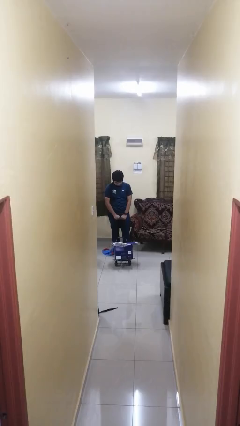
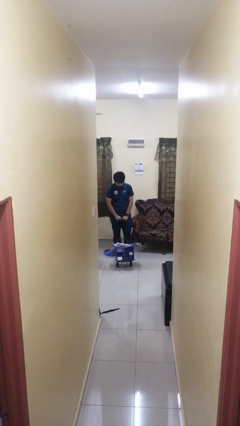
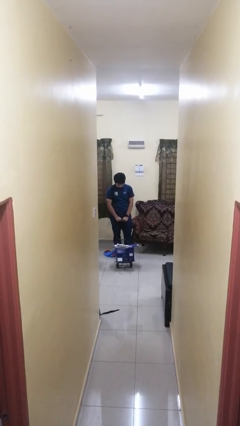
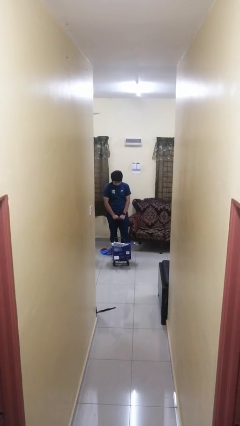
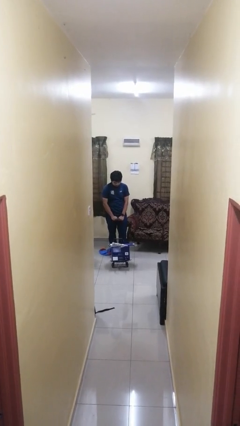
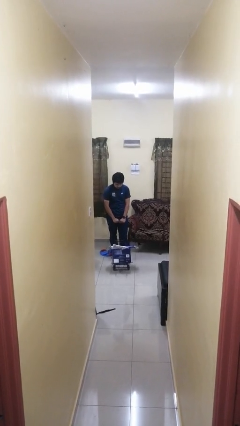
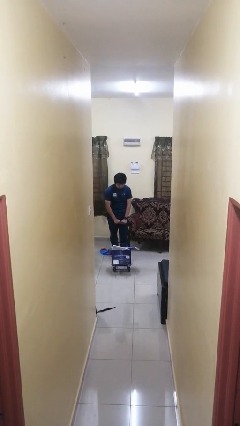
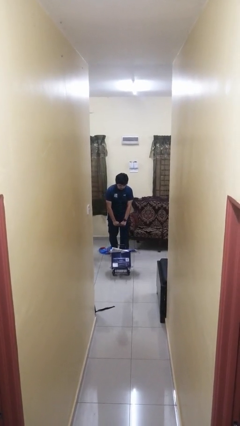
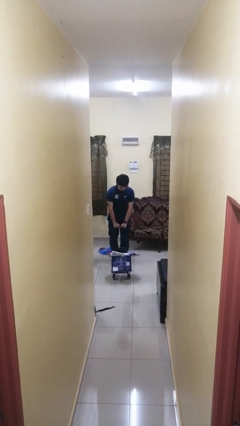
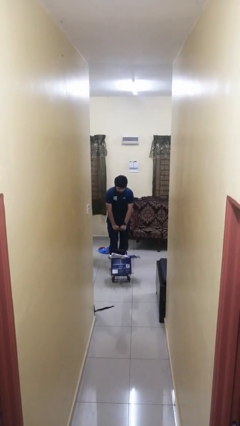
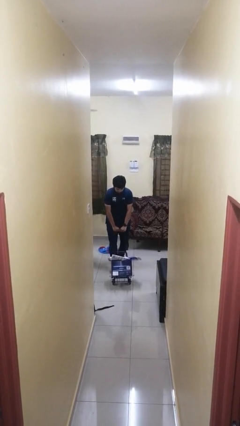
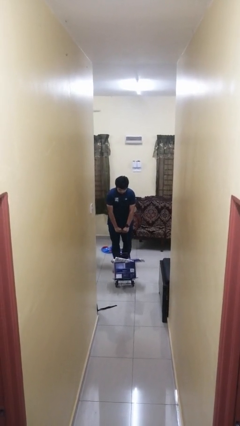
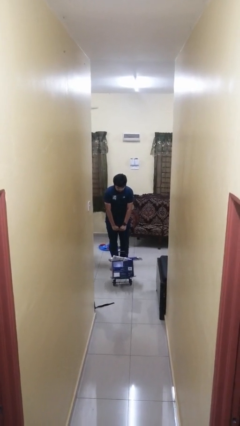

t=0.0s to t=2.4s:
person pushes wheeled cart

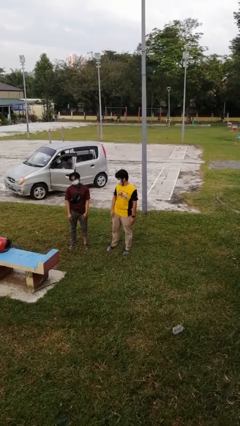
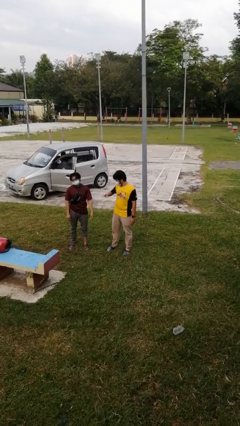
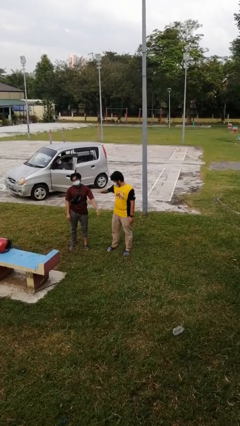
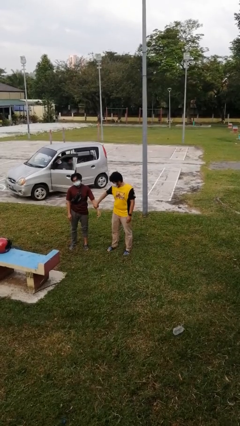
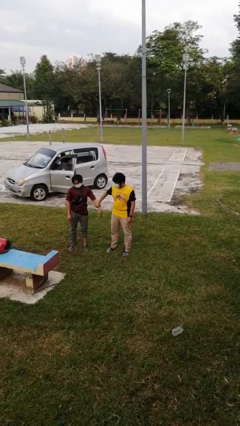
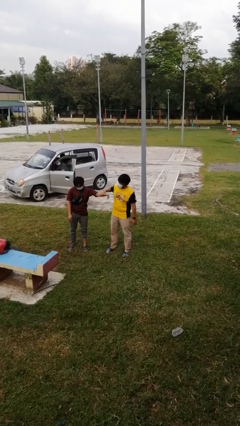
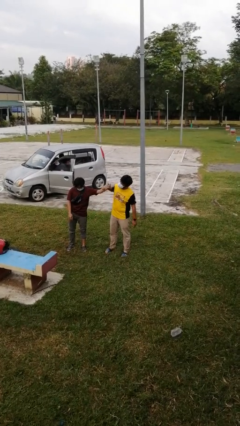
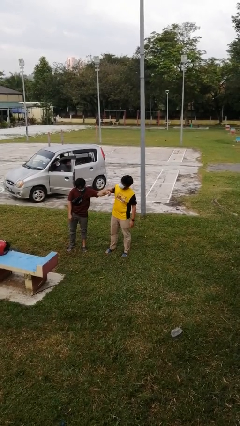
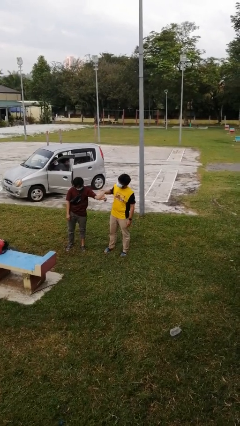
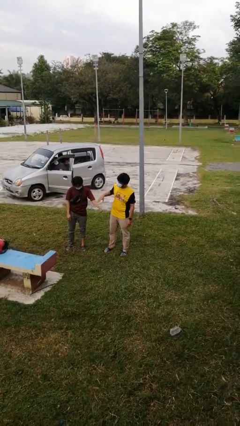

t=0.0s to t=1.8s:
person grabs person by forearm

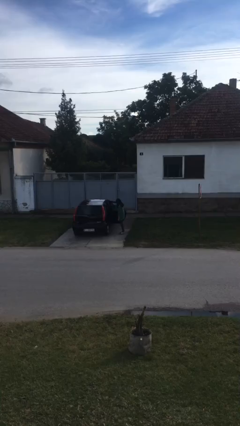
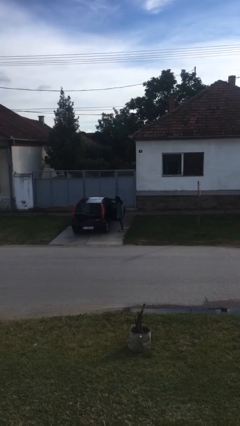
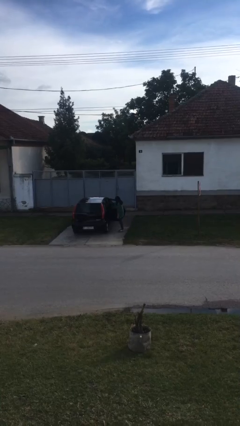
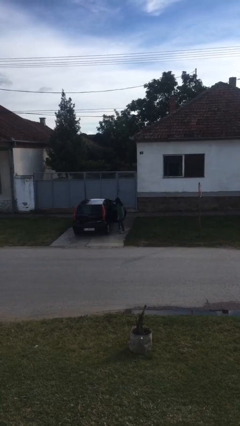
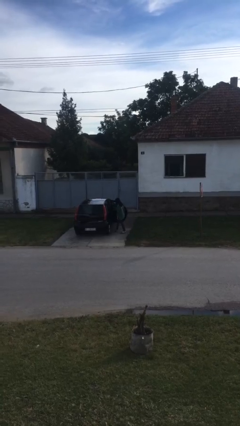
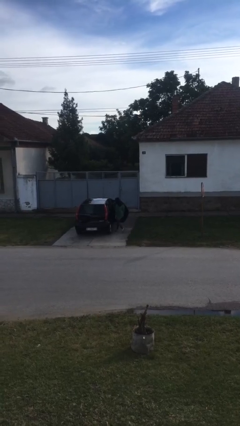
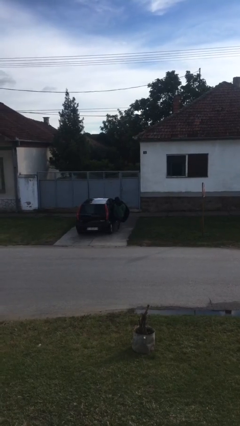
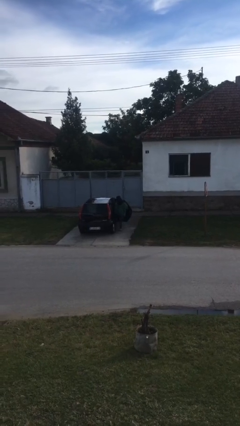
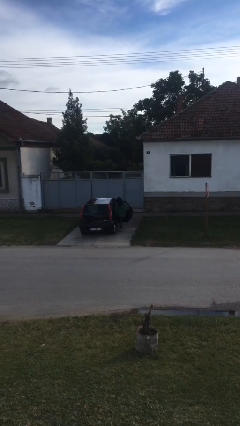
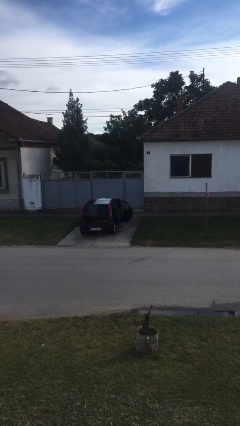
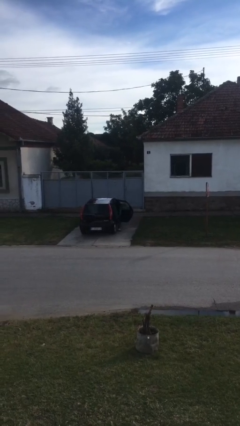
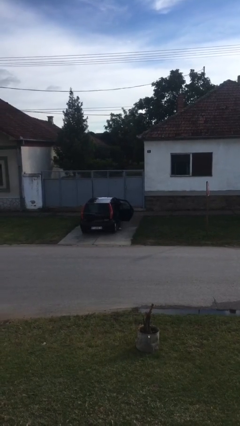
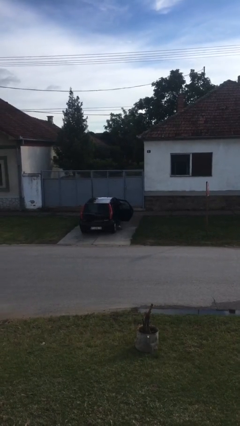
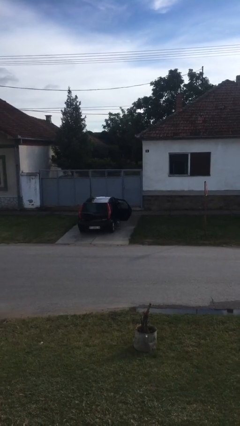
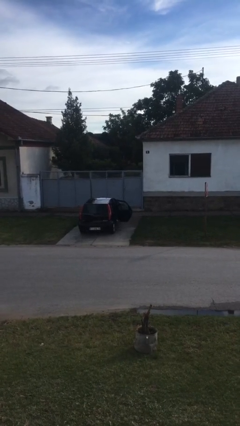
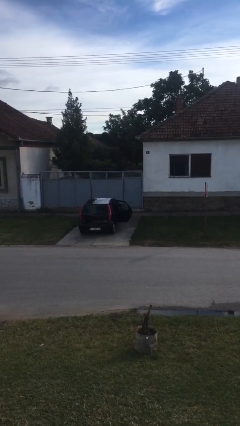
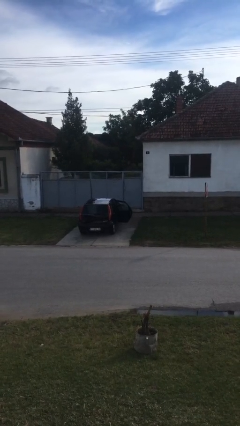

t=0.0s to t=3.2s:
person enters car

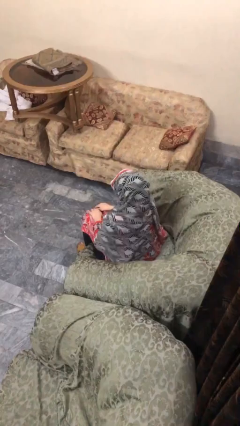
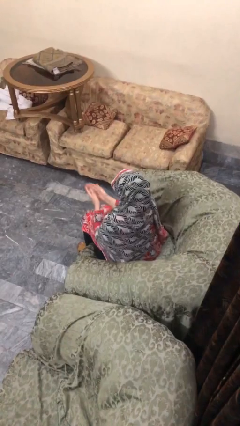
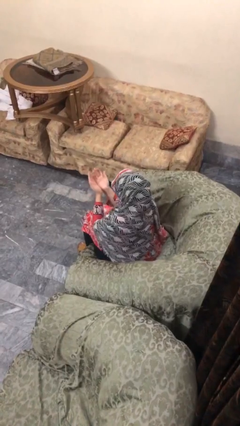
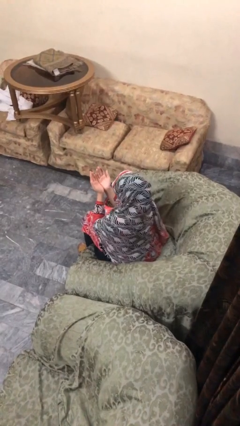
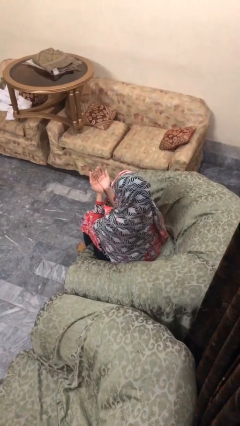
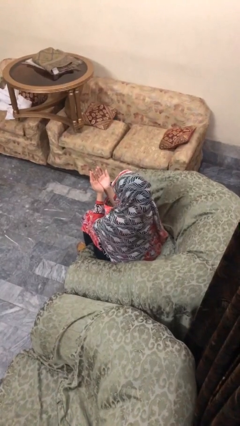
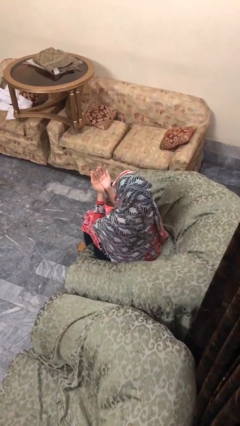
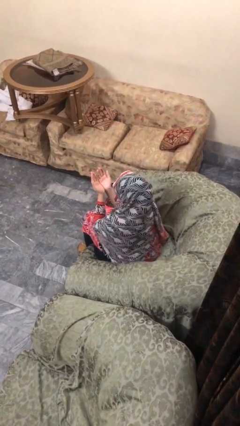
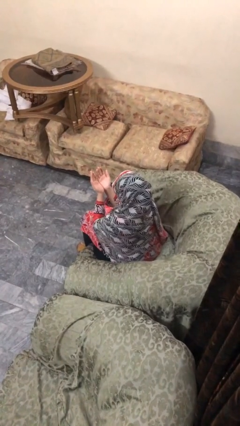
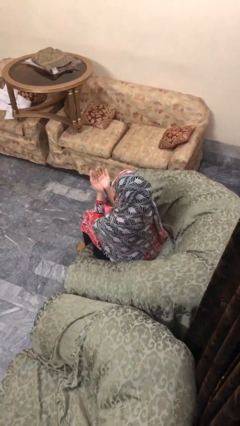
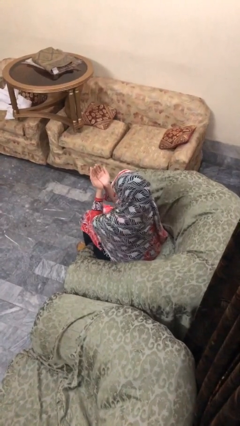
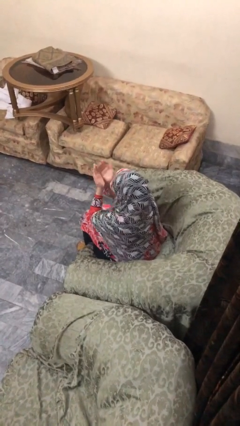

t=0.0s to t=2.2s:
person prays

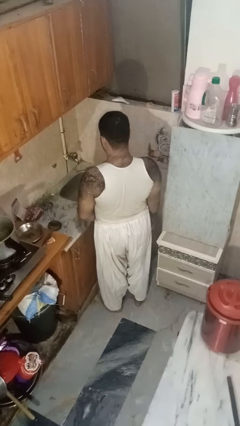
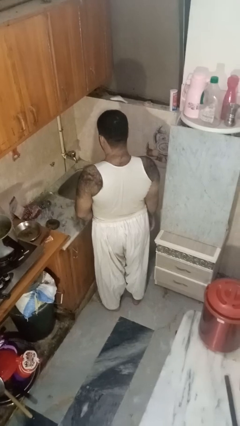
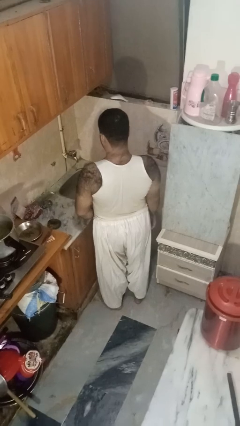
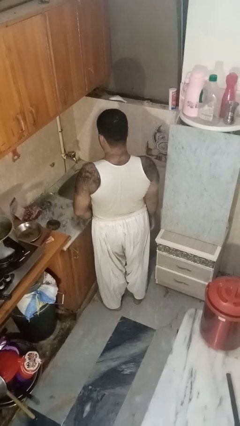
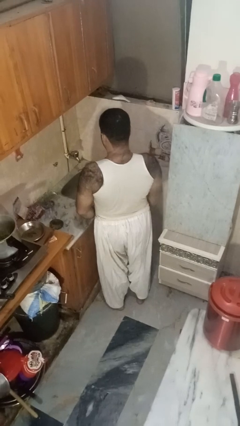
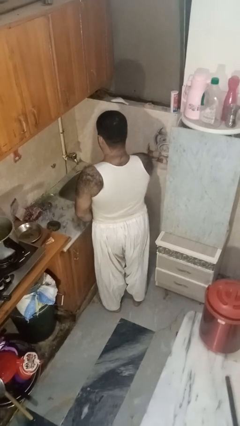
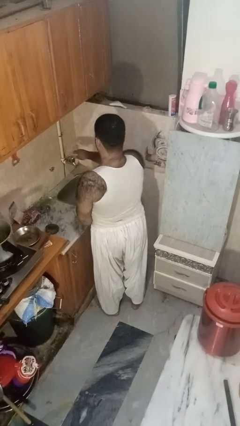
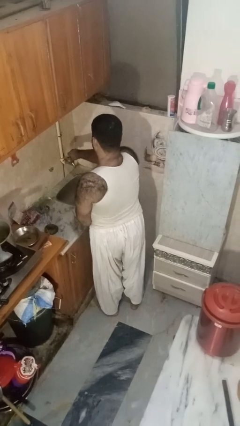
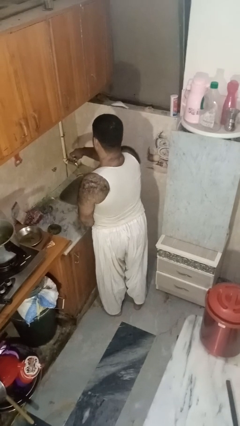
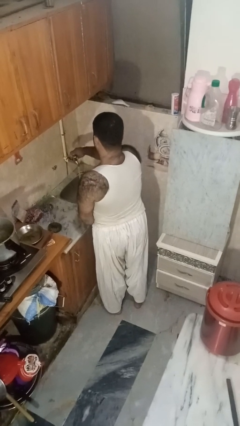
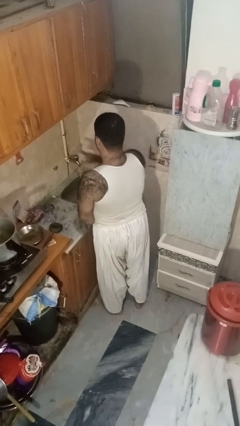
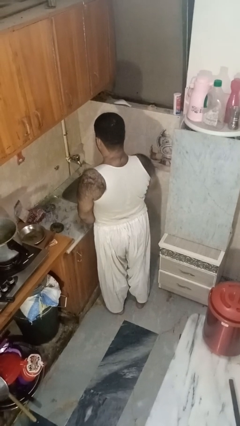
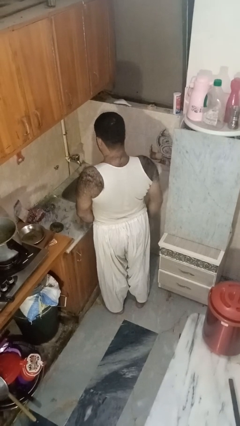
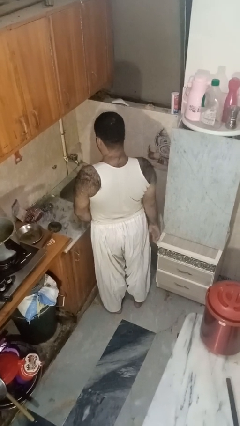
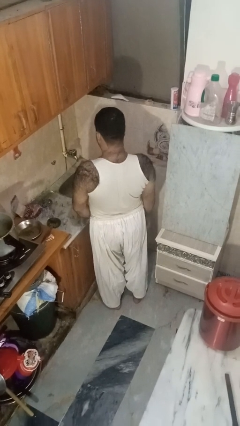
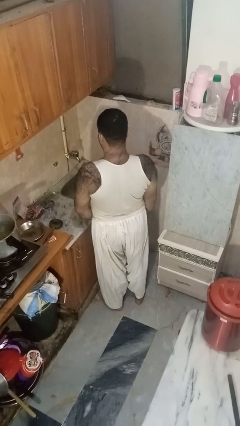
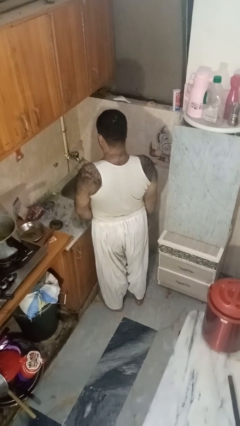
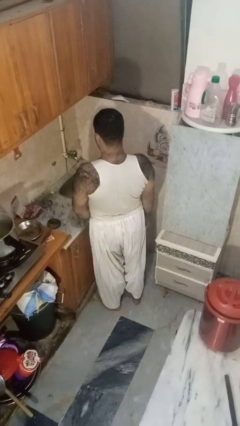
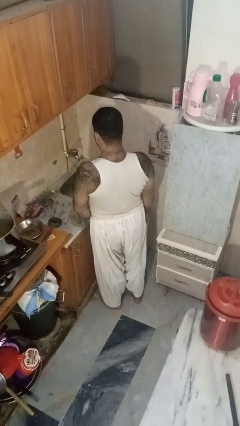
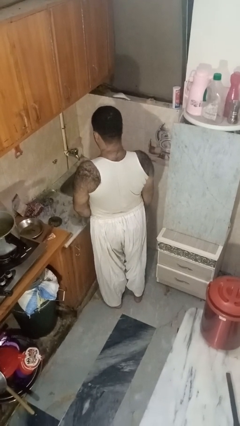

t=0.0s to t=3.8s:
person turns on faucet

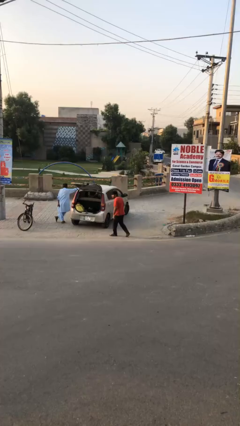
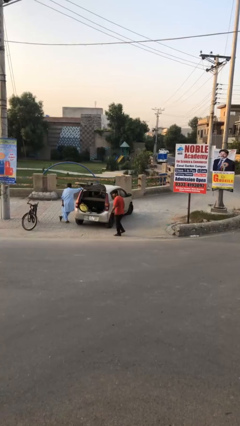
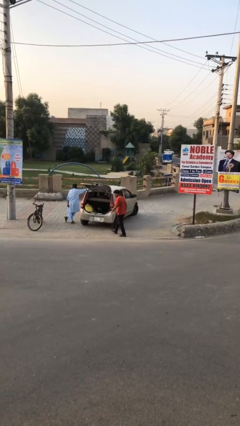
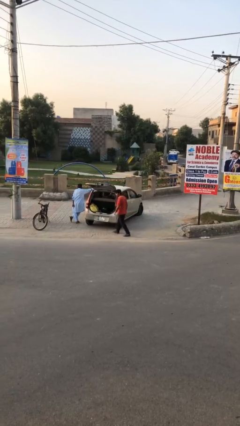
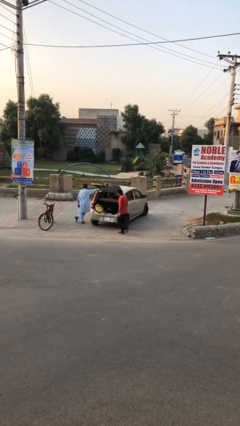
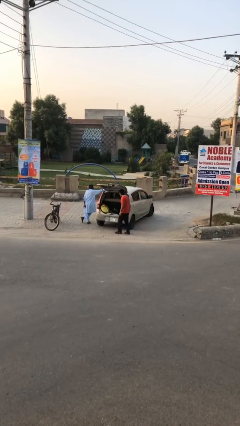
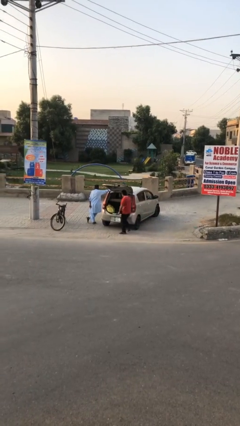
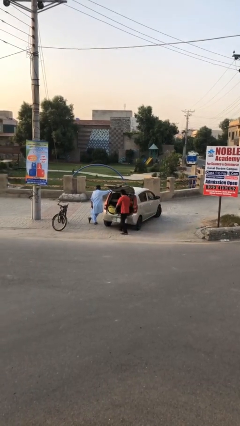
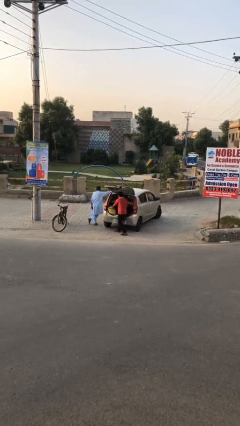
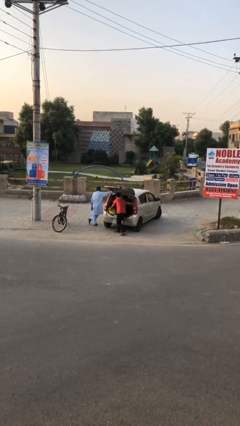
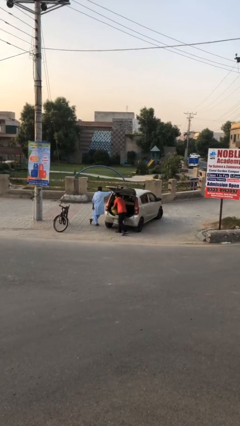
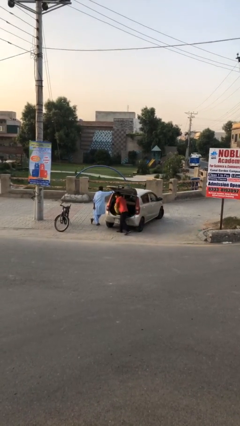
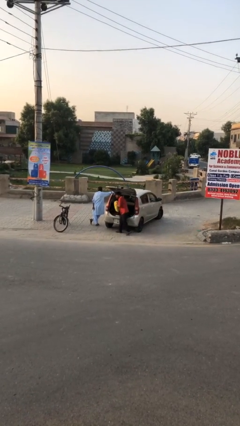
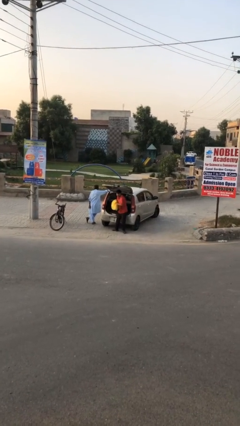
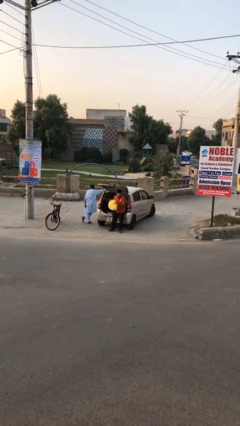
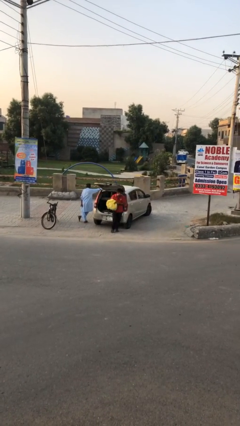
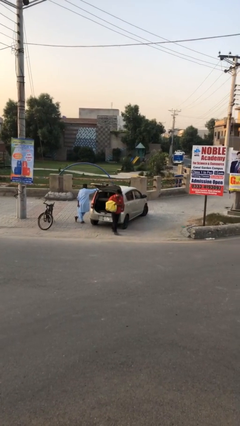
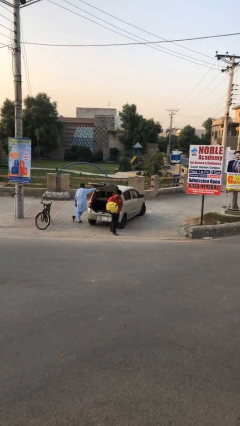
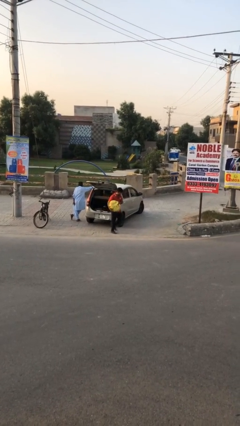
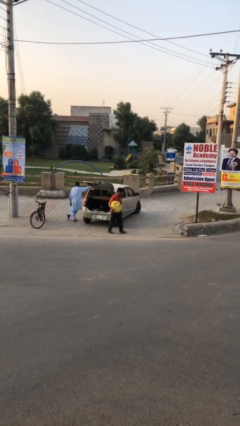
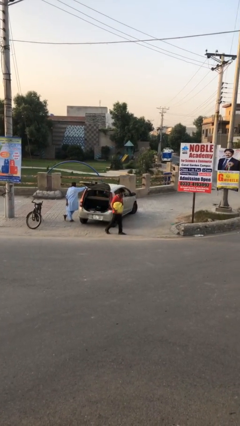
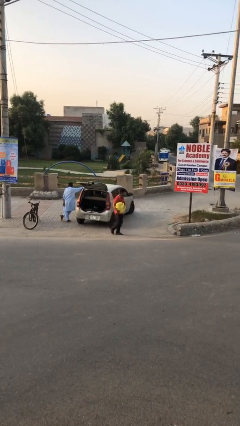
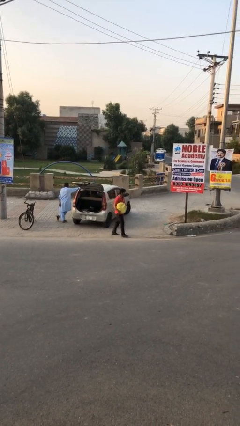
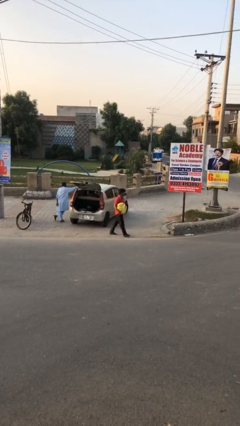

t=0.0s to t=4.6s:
person steals object from person
